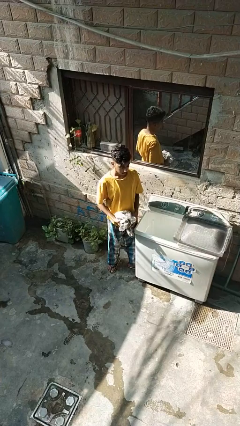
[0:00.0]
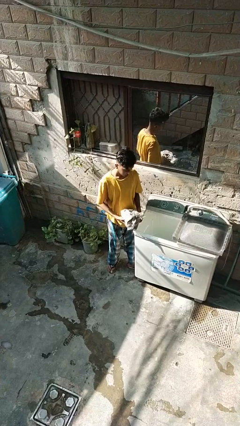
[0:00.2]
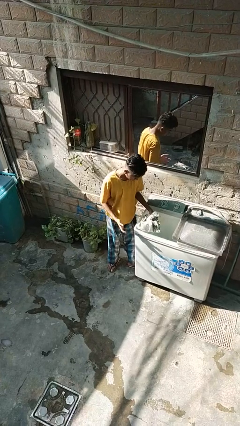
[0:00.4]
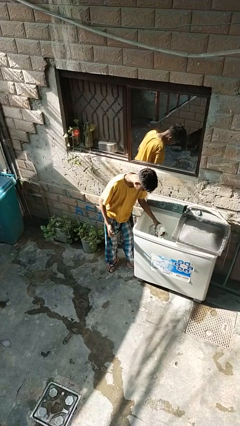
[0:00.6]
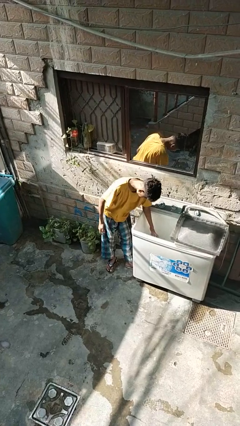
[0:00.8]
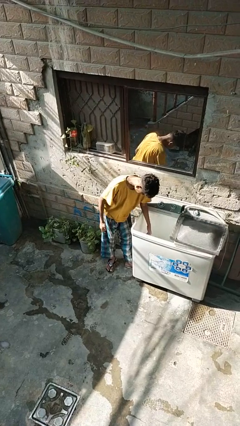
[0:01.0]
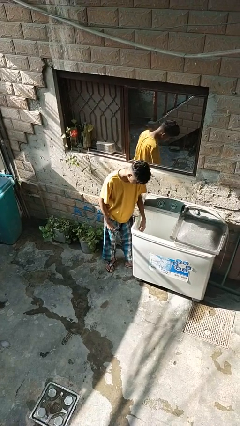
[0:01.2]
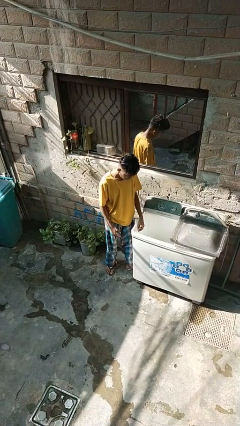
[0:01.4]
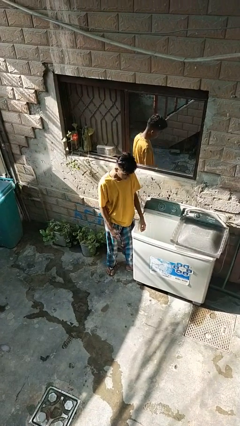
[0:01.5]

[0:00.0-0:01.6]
person loads clotheswasher

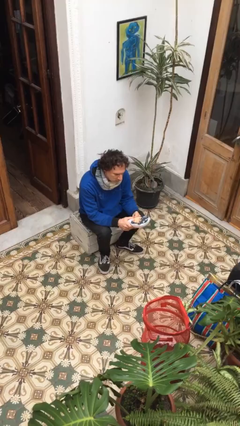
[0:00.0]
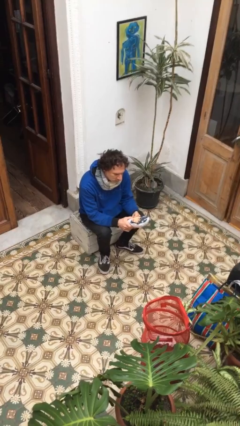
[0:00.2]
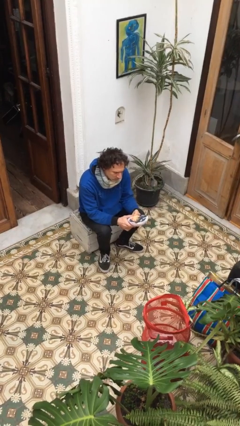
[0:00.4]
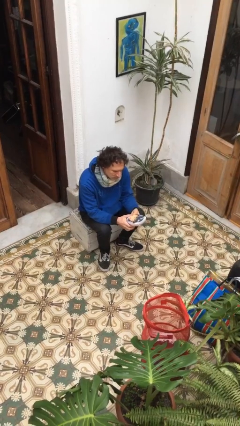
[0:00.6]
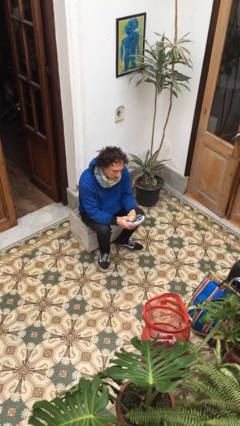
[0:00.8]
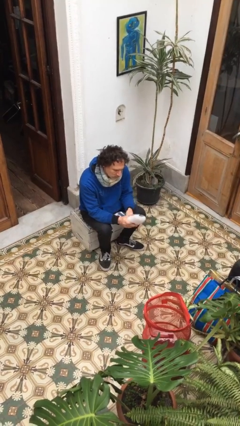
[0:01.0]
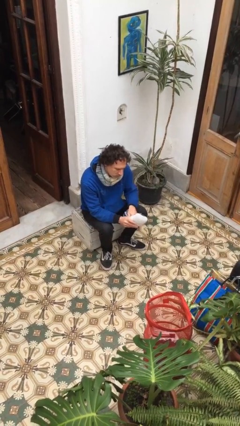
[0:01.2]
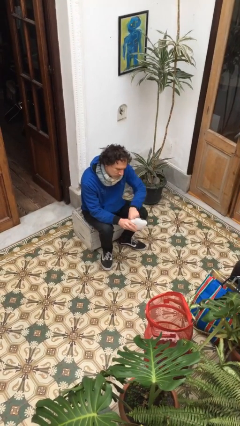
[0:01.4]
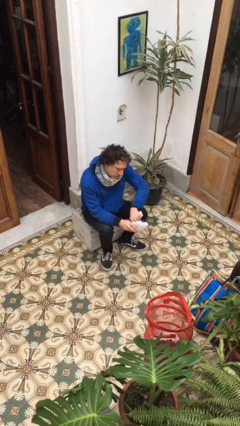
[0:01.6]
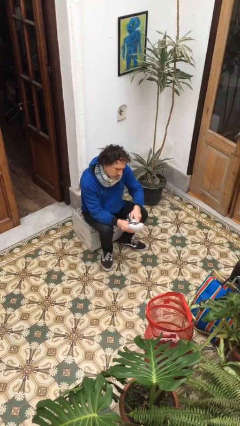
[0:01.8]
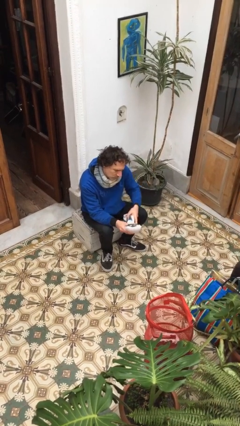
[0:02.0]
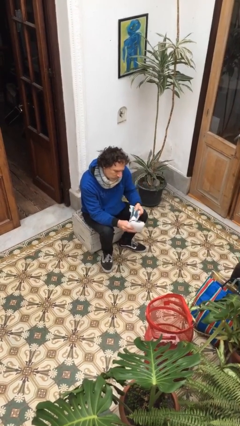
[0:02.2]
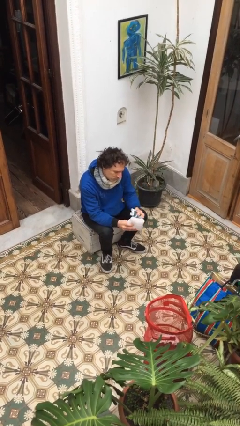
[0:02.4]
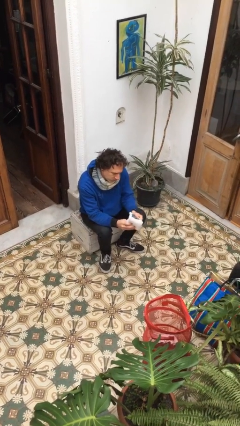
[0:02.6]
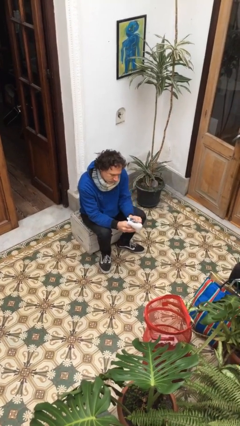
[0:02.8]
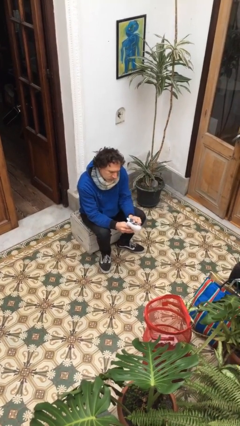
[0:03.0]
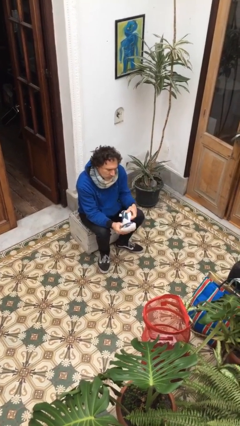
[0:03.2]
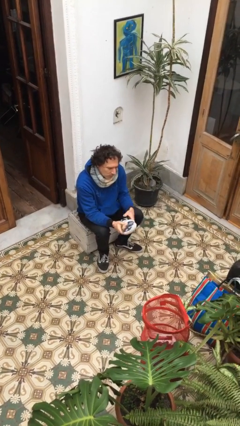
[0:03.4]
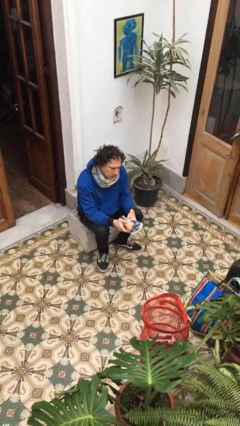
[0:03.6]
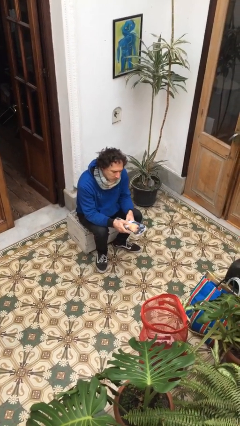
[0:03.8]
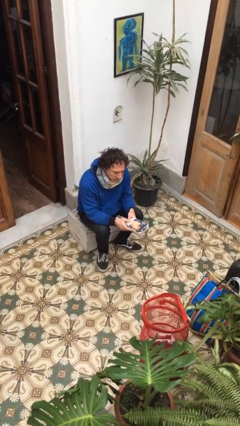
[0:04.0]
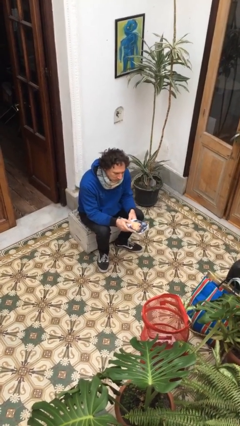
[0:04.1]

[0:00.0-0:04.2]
person squeezes object

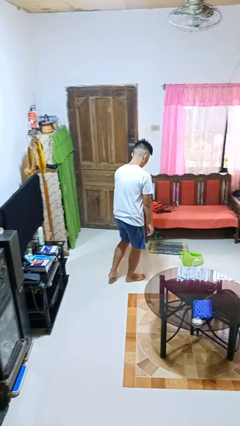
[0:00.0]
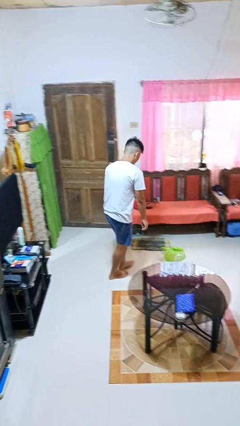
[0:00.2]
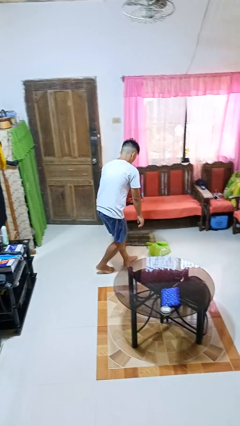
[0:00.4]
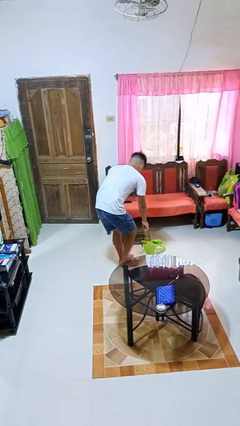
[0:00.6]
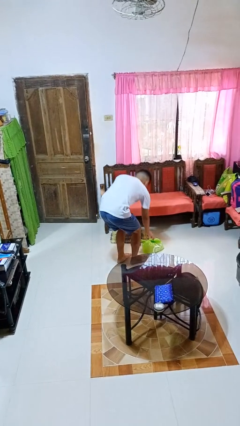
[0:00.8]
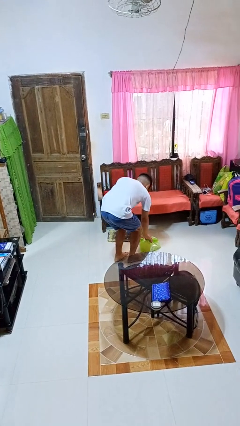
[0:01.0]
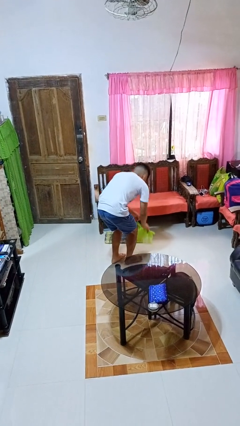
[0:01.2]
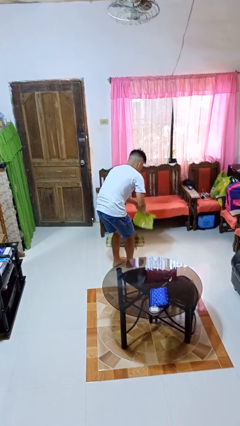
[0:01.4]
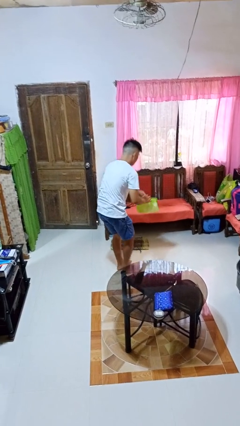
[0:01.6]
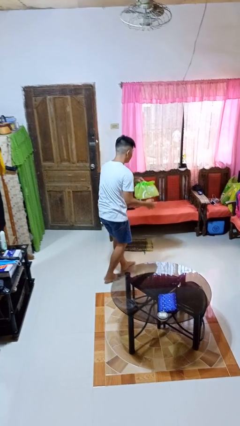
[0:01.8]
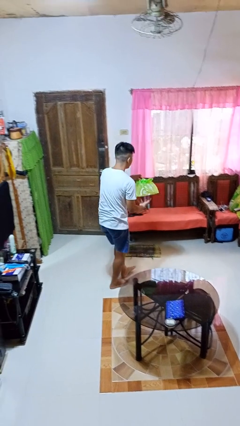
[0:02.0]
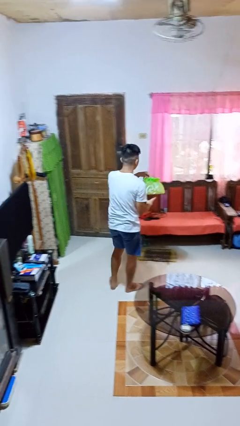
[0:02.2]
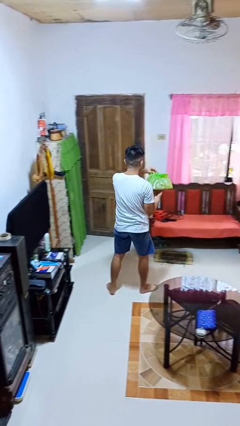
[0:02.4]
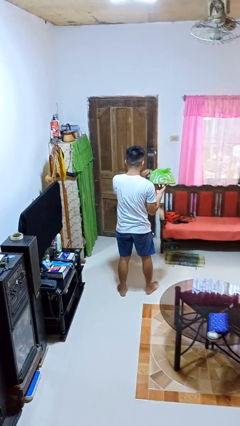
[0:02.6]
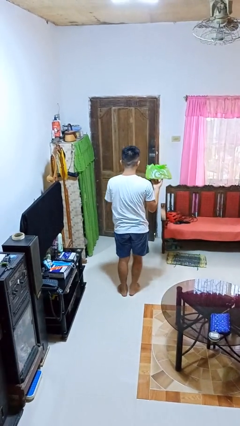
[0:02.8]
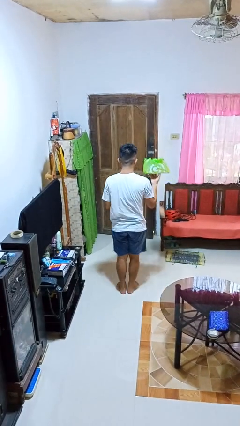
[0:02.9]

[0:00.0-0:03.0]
person picks up object from floor

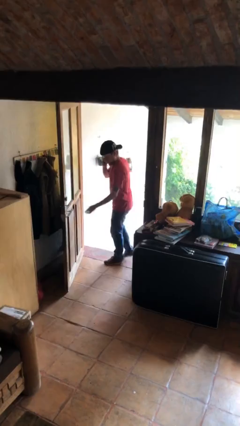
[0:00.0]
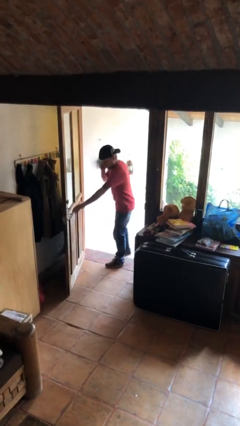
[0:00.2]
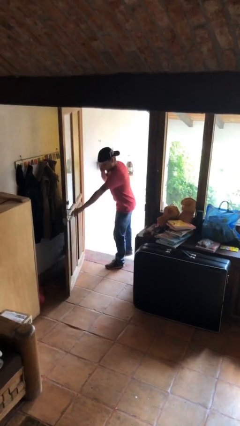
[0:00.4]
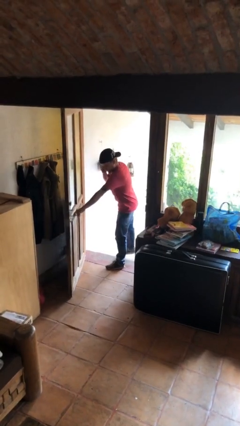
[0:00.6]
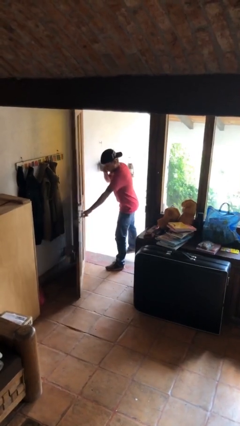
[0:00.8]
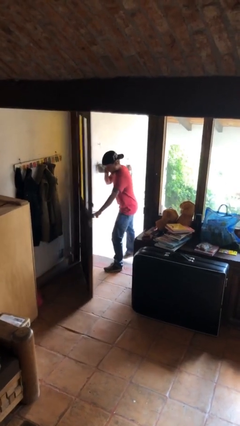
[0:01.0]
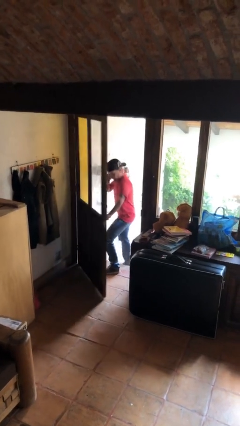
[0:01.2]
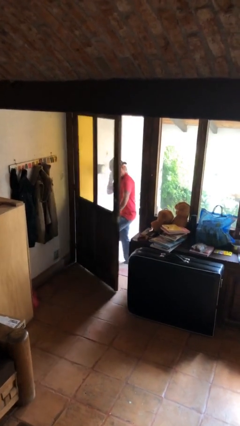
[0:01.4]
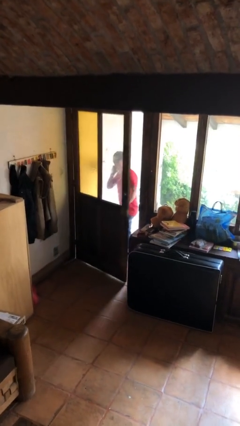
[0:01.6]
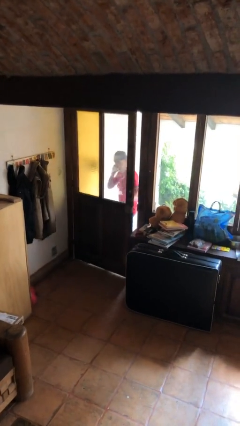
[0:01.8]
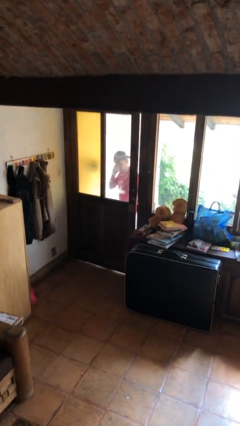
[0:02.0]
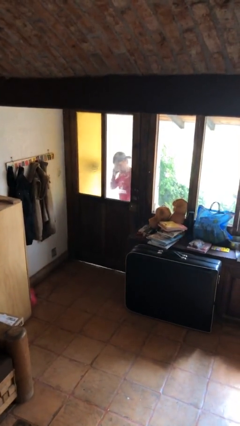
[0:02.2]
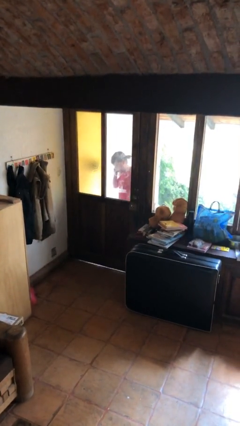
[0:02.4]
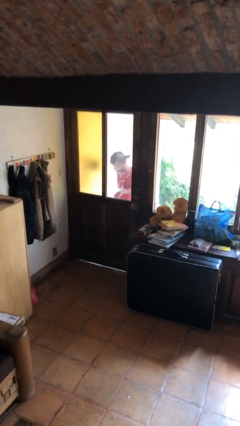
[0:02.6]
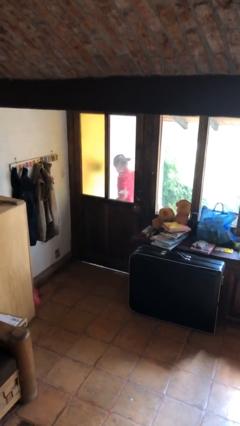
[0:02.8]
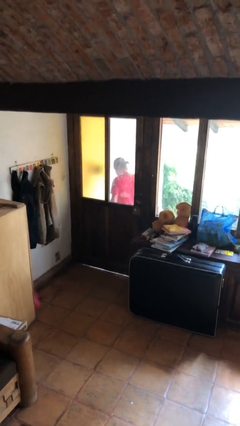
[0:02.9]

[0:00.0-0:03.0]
person closes facility door

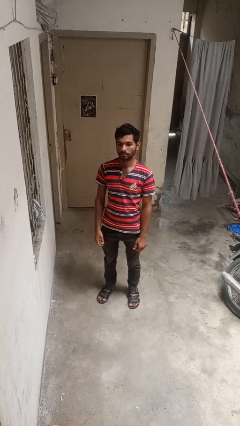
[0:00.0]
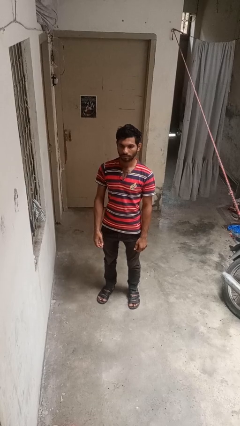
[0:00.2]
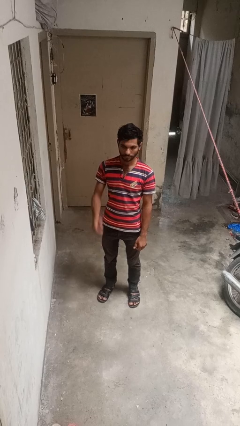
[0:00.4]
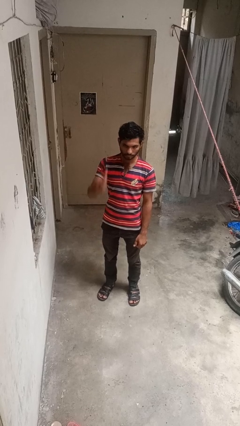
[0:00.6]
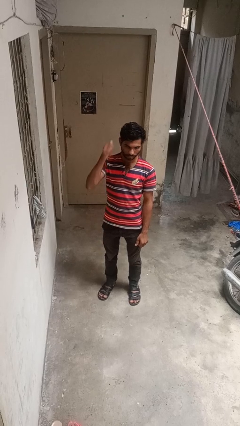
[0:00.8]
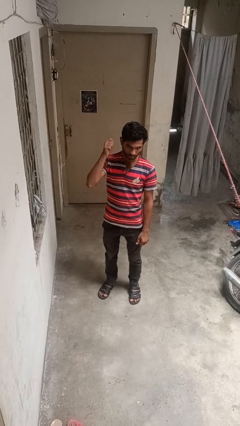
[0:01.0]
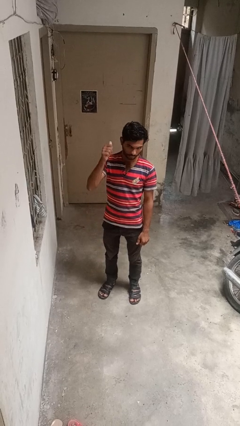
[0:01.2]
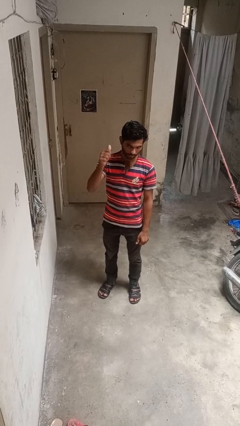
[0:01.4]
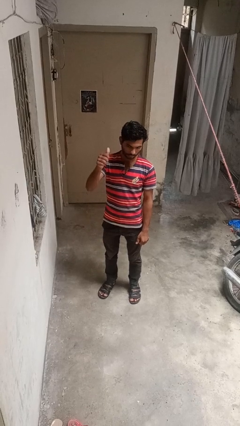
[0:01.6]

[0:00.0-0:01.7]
person gestures behind me

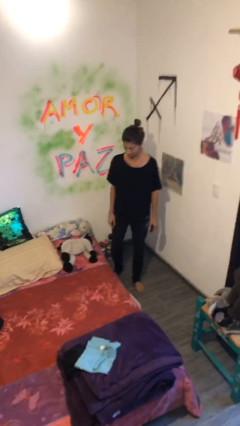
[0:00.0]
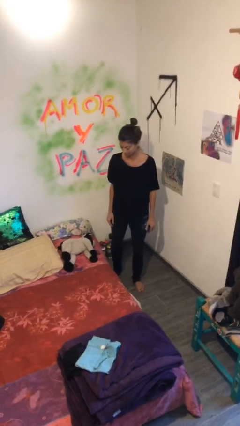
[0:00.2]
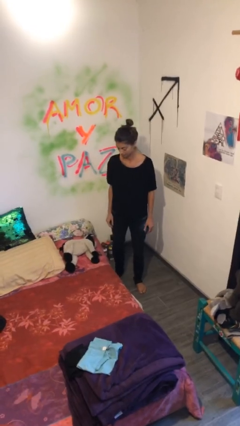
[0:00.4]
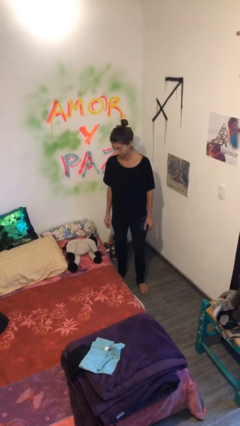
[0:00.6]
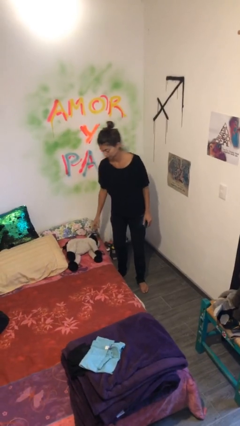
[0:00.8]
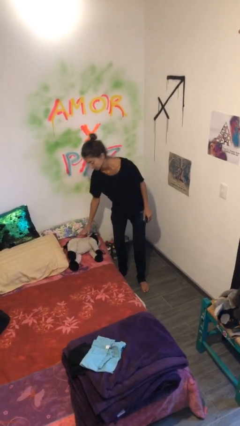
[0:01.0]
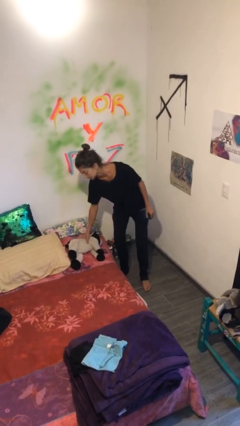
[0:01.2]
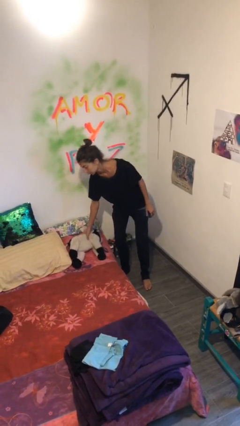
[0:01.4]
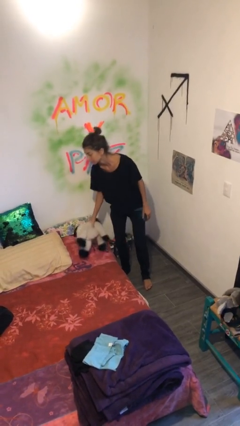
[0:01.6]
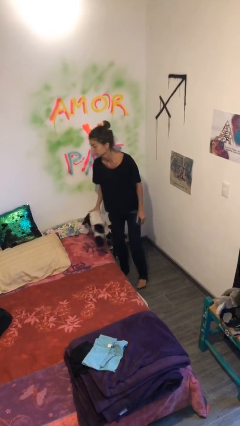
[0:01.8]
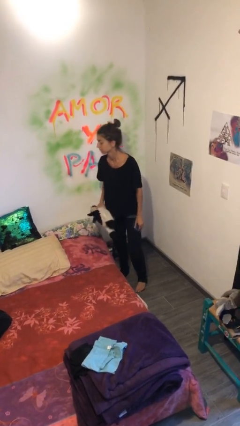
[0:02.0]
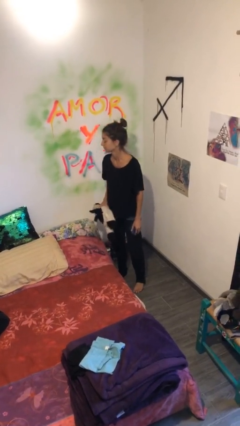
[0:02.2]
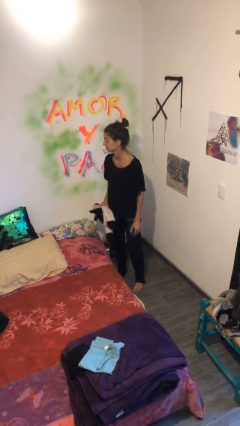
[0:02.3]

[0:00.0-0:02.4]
person picks up object from bed

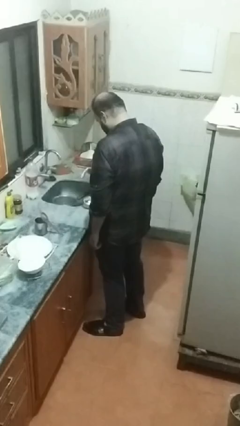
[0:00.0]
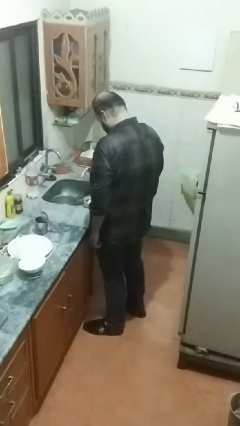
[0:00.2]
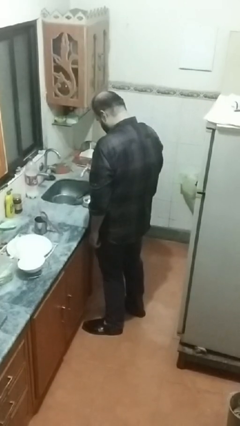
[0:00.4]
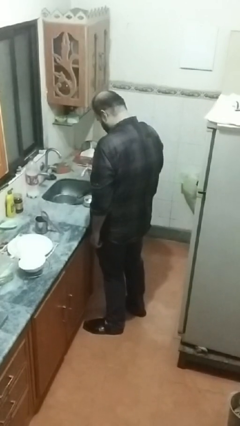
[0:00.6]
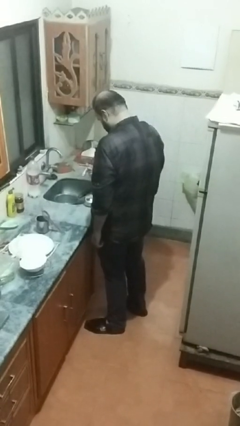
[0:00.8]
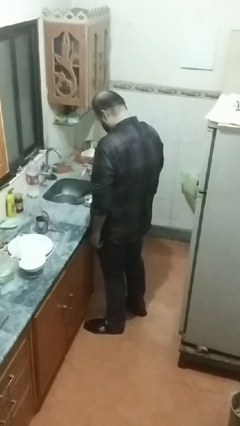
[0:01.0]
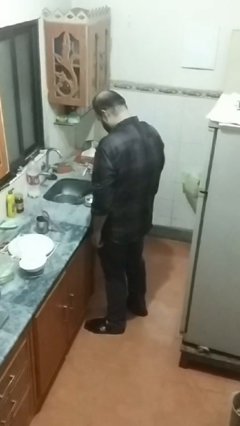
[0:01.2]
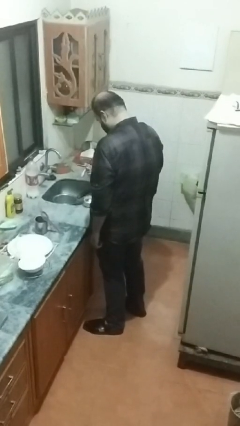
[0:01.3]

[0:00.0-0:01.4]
person pours into bowl
